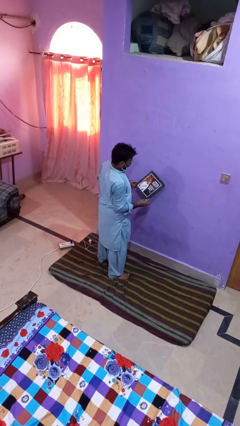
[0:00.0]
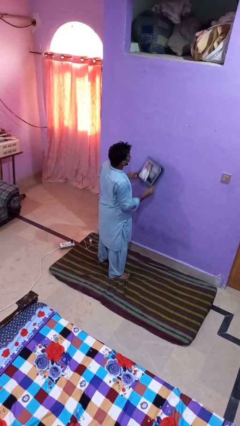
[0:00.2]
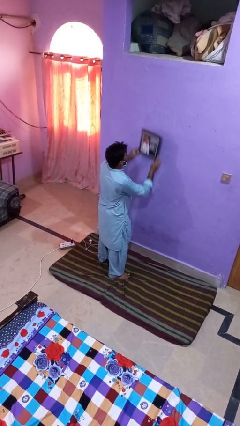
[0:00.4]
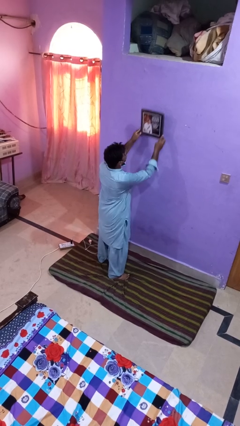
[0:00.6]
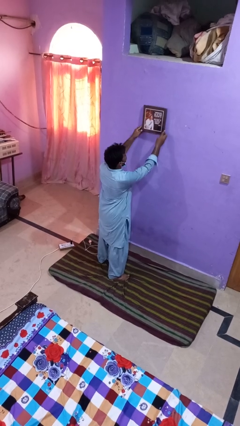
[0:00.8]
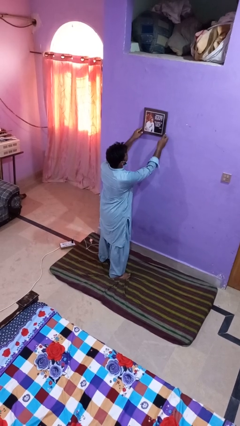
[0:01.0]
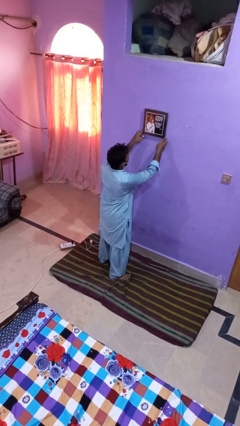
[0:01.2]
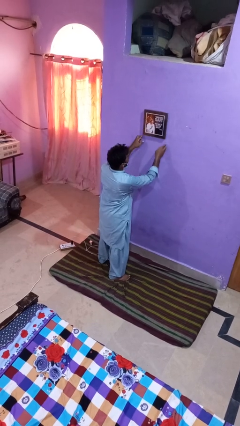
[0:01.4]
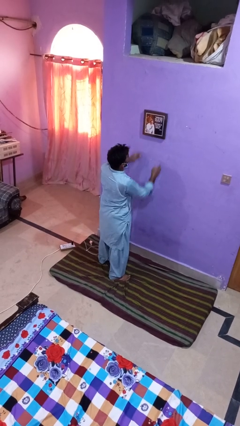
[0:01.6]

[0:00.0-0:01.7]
person puts up picture frame

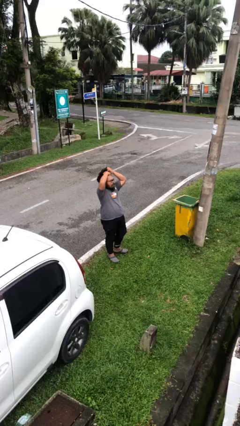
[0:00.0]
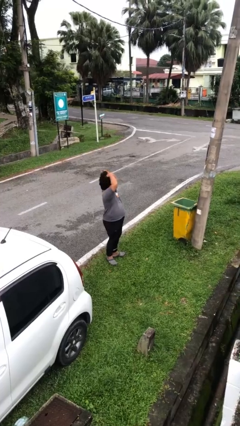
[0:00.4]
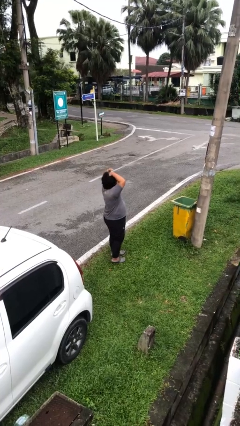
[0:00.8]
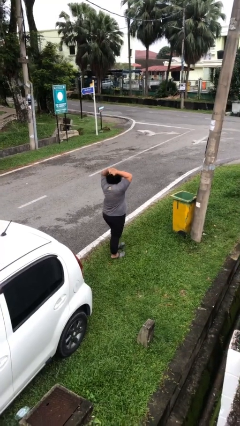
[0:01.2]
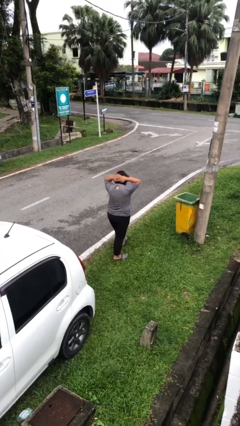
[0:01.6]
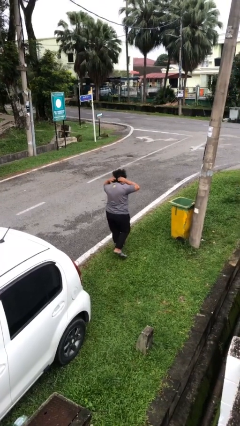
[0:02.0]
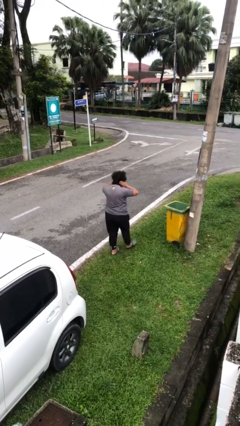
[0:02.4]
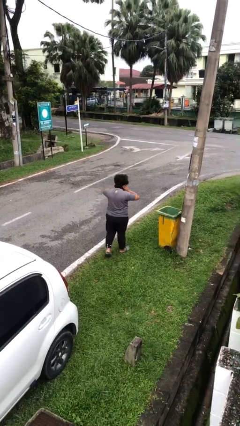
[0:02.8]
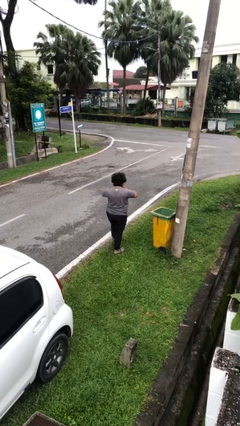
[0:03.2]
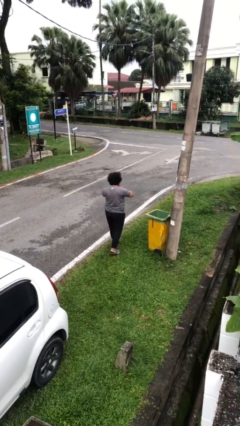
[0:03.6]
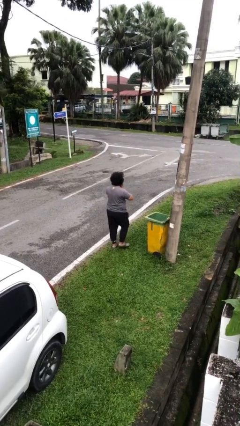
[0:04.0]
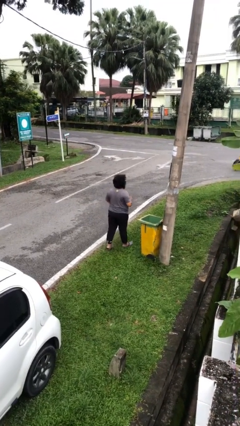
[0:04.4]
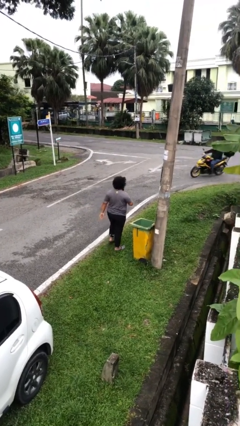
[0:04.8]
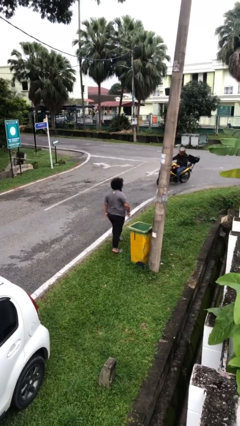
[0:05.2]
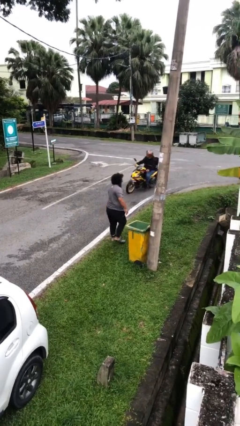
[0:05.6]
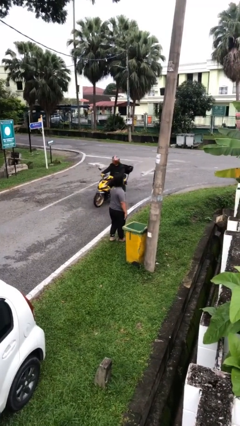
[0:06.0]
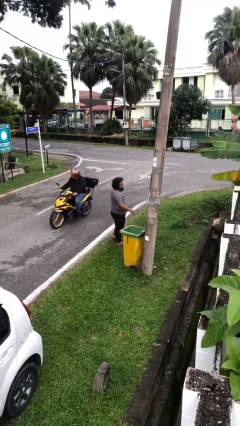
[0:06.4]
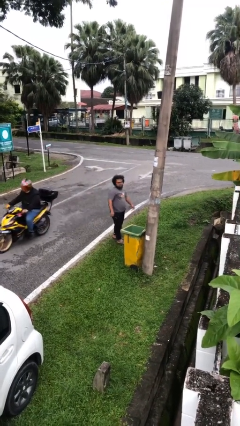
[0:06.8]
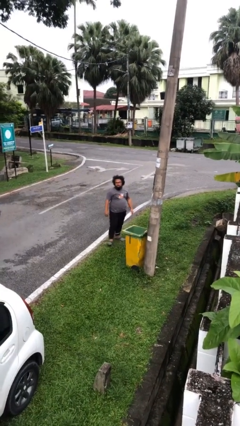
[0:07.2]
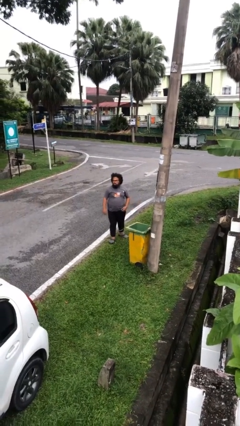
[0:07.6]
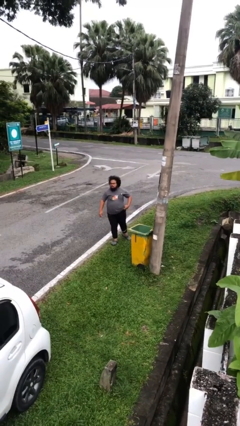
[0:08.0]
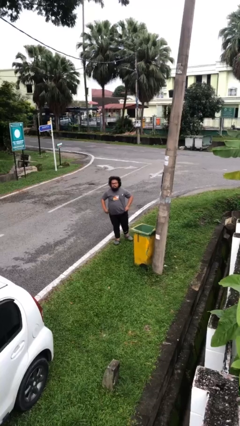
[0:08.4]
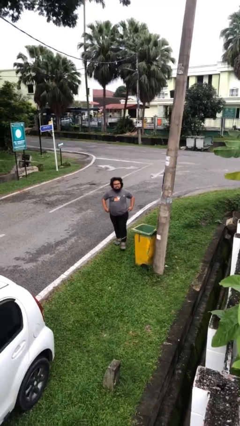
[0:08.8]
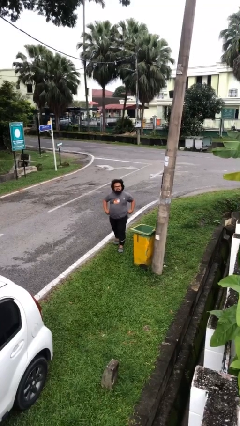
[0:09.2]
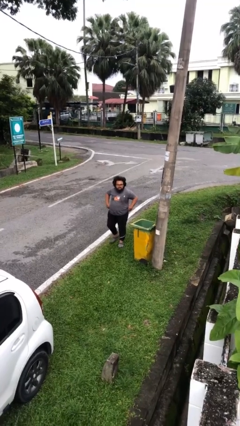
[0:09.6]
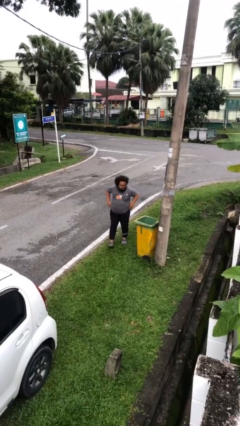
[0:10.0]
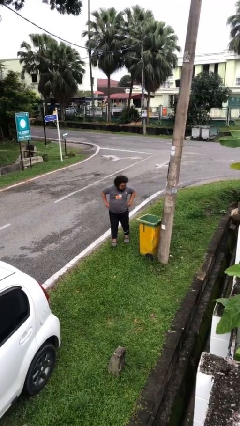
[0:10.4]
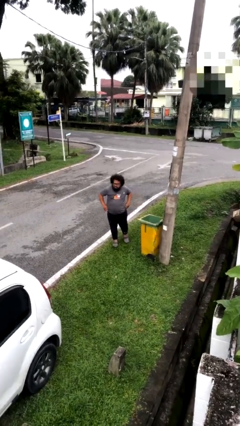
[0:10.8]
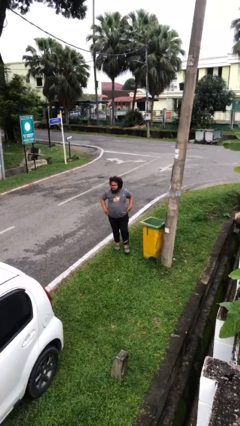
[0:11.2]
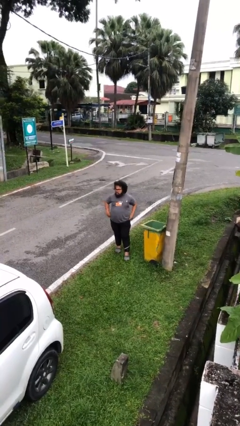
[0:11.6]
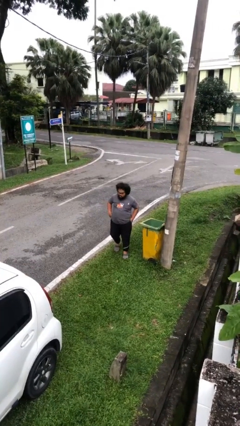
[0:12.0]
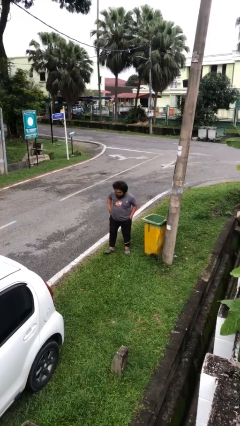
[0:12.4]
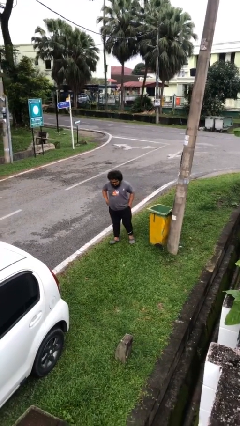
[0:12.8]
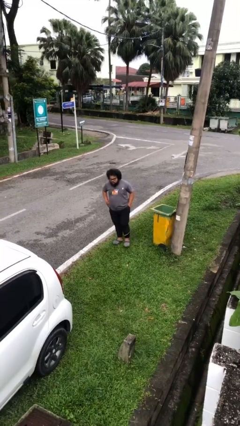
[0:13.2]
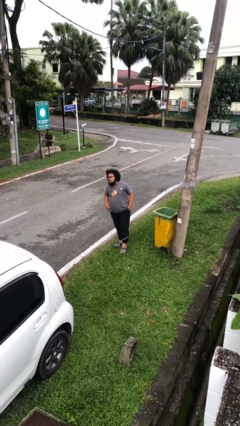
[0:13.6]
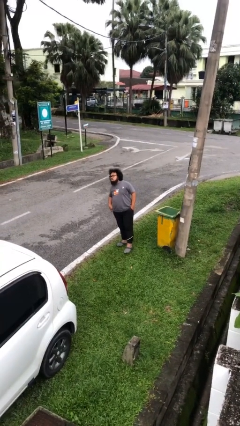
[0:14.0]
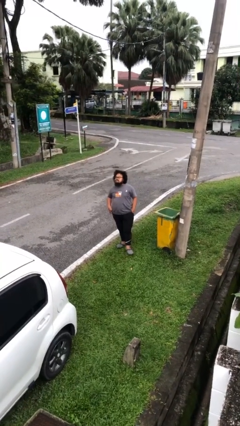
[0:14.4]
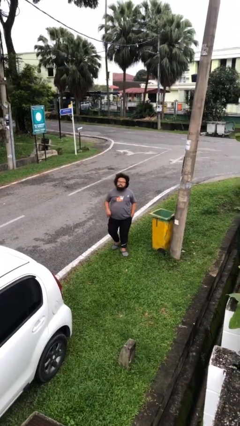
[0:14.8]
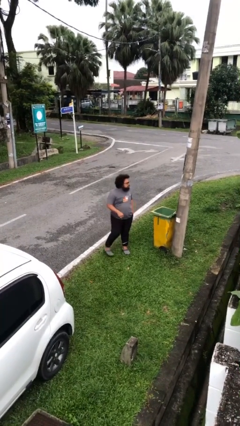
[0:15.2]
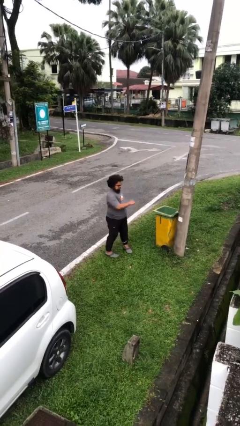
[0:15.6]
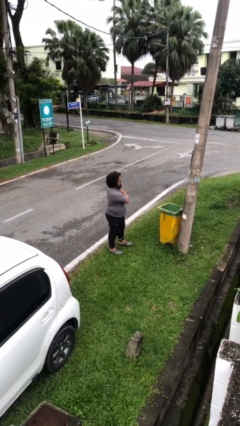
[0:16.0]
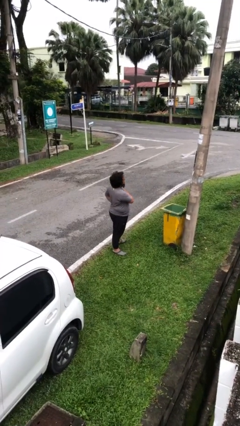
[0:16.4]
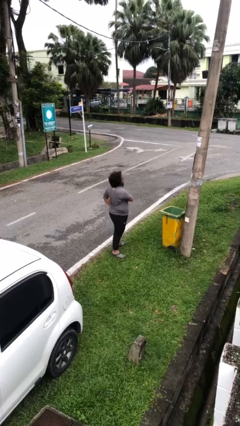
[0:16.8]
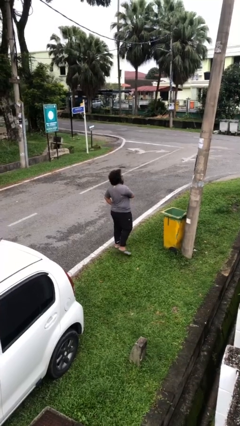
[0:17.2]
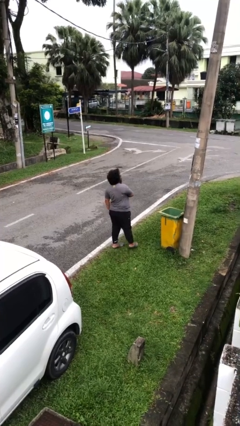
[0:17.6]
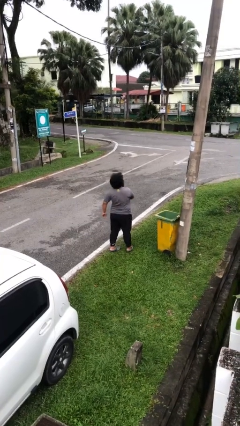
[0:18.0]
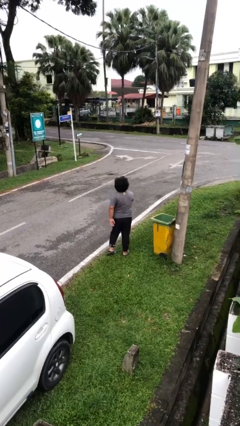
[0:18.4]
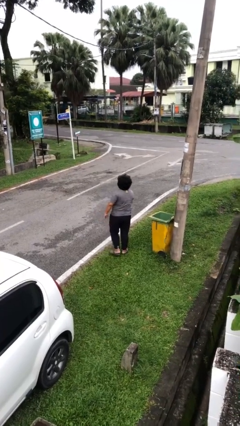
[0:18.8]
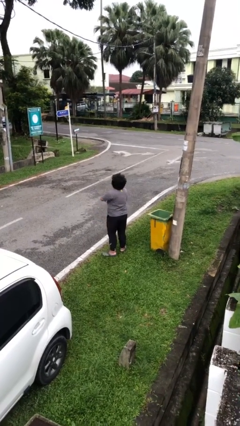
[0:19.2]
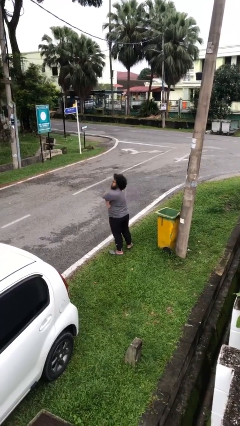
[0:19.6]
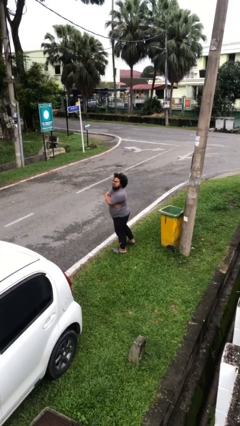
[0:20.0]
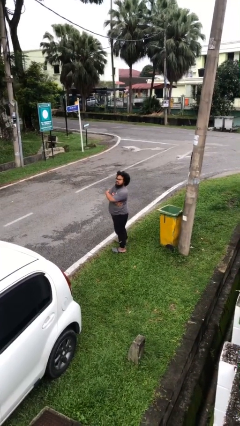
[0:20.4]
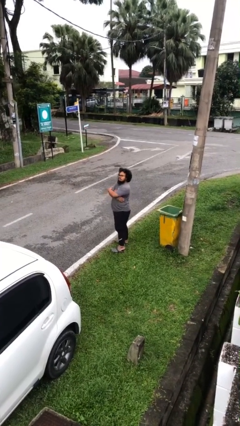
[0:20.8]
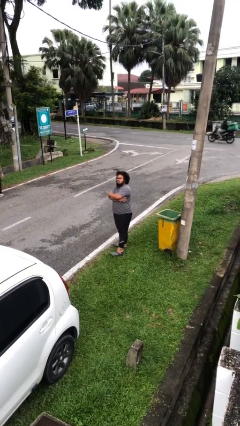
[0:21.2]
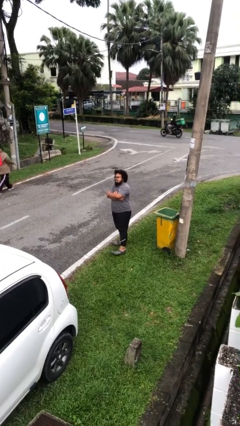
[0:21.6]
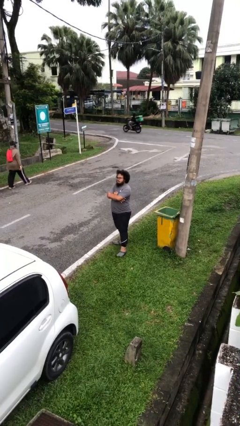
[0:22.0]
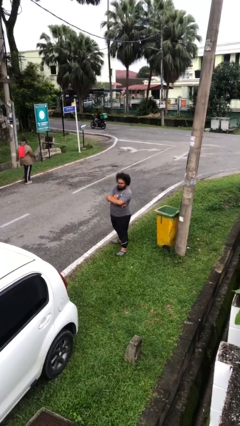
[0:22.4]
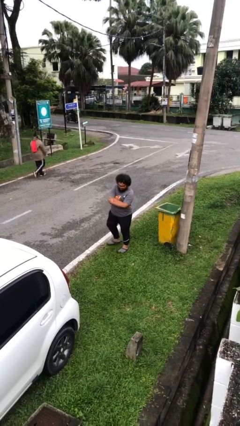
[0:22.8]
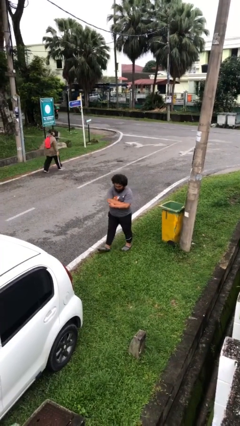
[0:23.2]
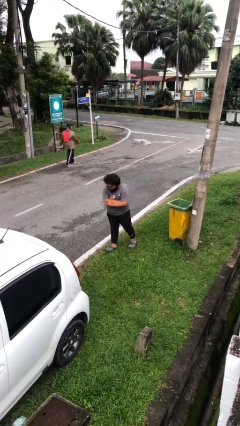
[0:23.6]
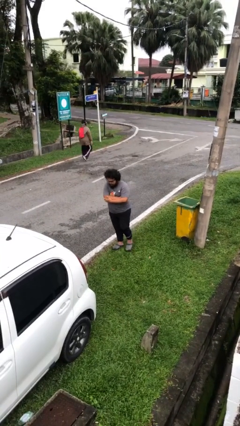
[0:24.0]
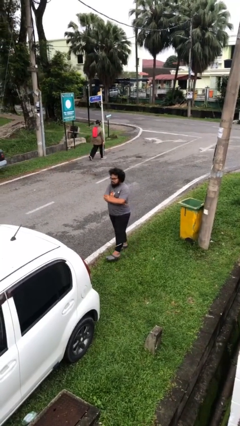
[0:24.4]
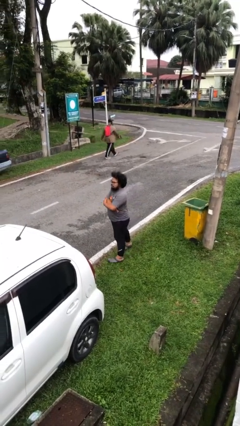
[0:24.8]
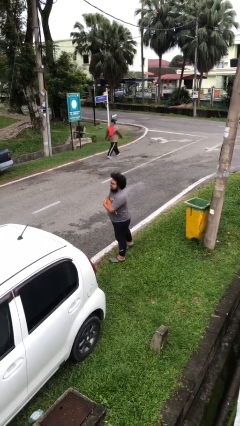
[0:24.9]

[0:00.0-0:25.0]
person walks

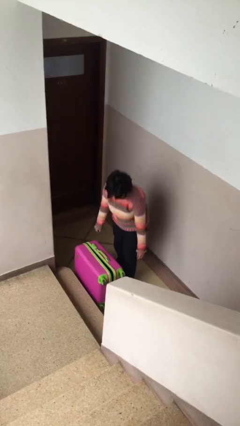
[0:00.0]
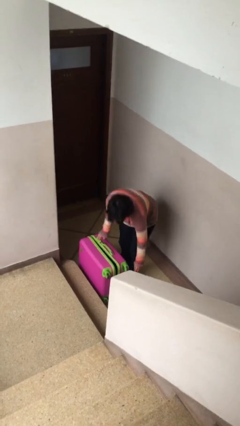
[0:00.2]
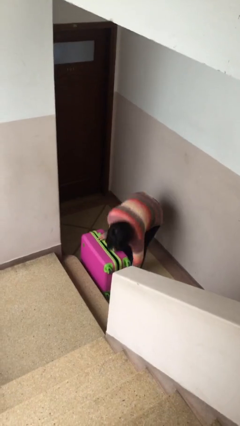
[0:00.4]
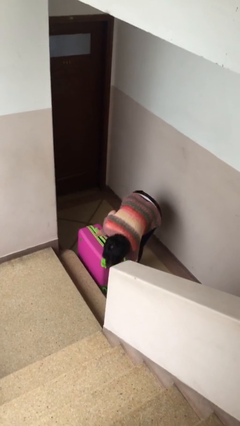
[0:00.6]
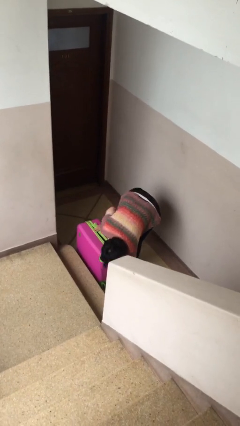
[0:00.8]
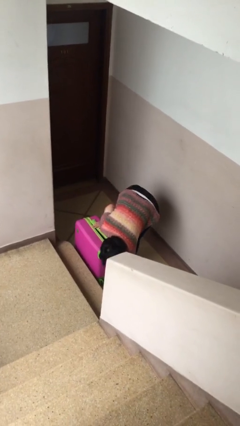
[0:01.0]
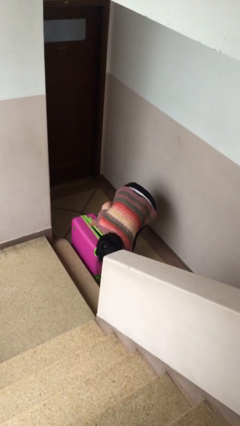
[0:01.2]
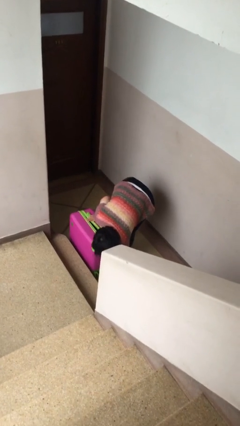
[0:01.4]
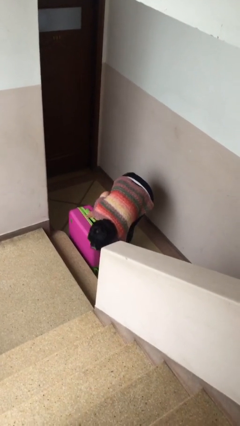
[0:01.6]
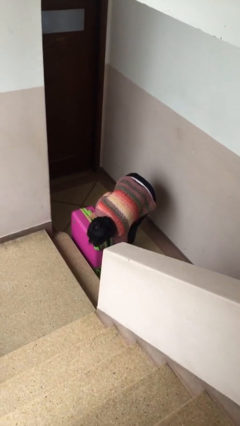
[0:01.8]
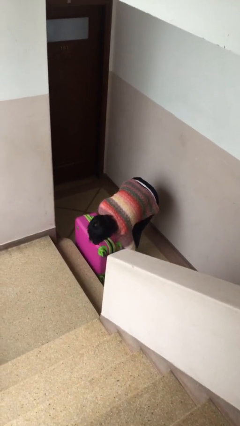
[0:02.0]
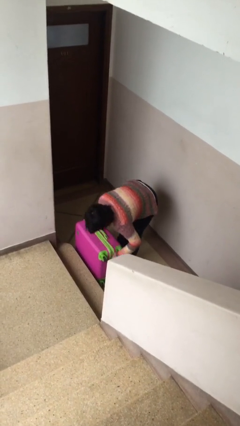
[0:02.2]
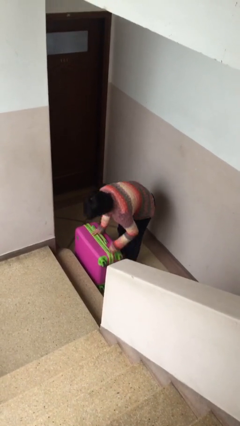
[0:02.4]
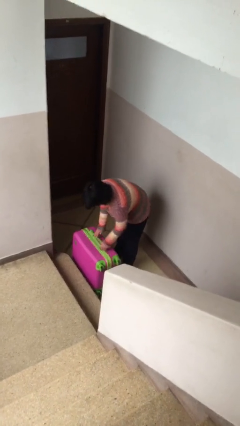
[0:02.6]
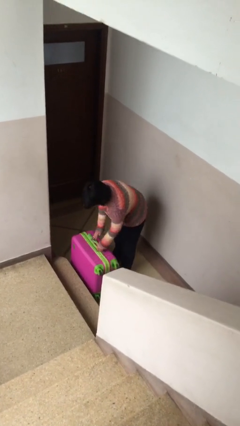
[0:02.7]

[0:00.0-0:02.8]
person closes suitcase

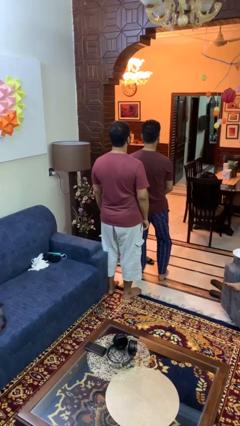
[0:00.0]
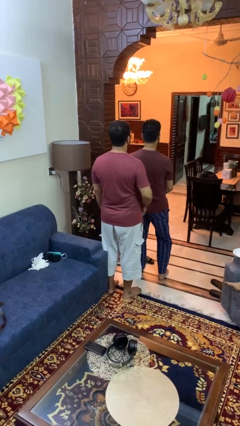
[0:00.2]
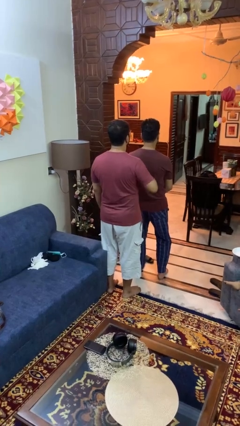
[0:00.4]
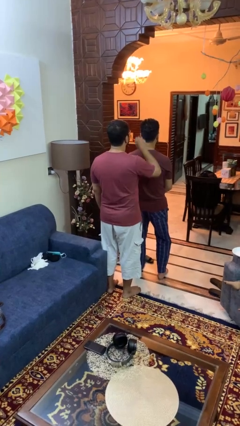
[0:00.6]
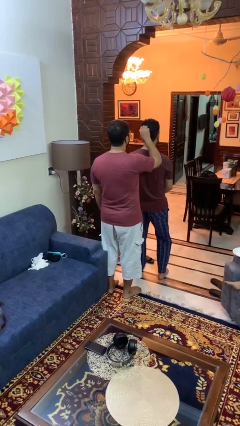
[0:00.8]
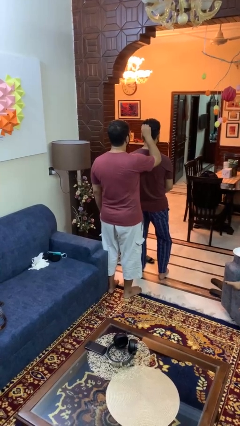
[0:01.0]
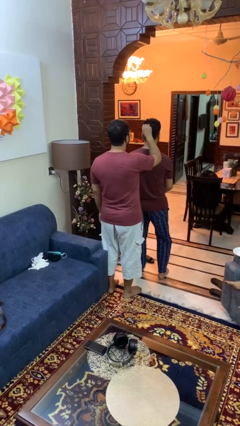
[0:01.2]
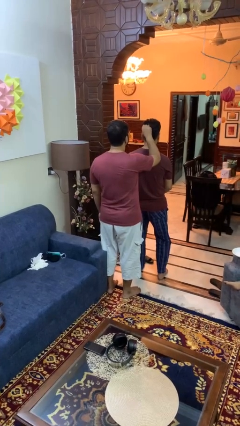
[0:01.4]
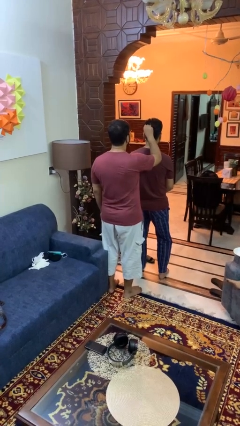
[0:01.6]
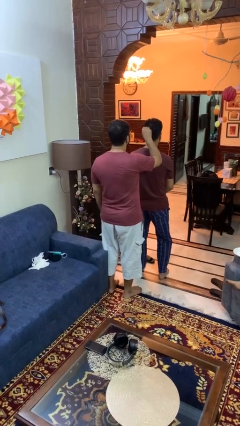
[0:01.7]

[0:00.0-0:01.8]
person grabs person by hair
